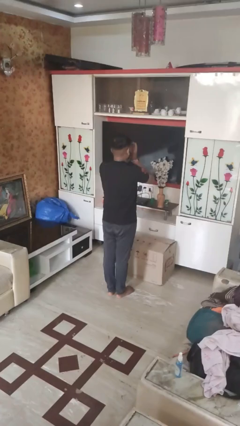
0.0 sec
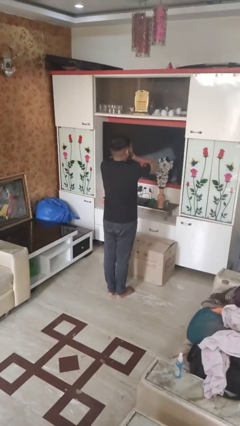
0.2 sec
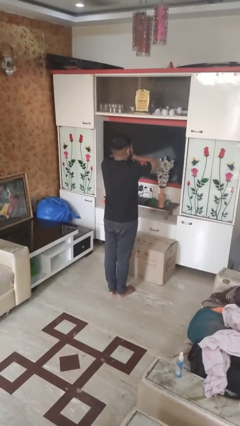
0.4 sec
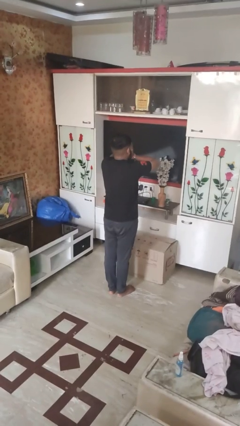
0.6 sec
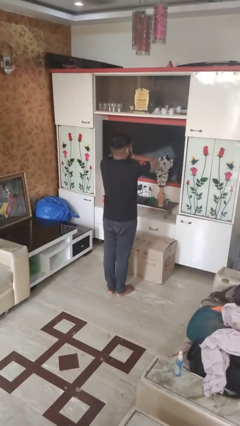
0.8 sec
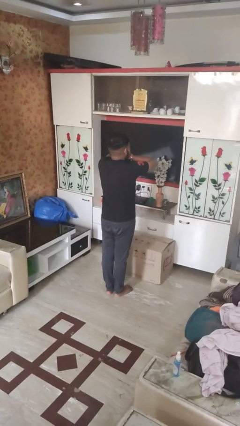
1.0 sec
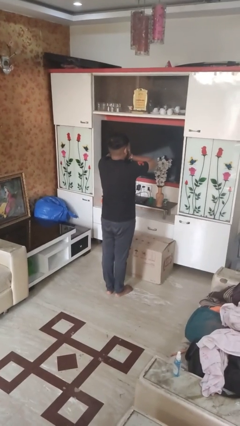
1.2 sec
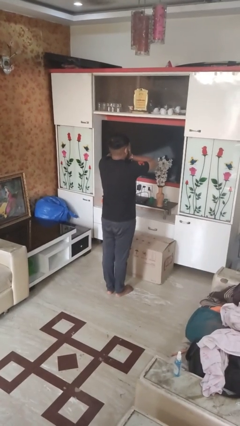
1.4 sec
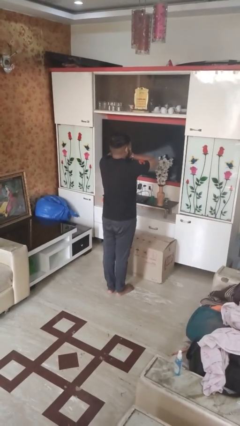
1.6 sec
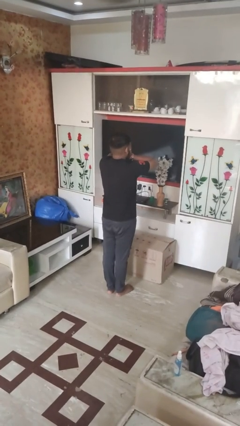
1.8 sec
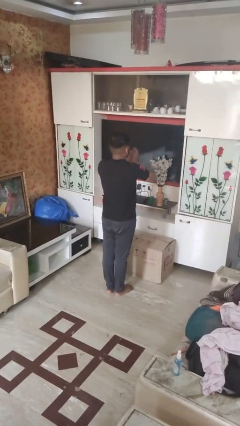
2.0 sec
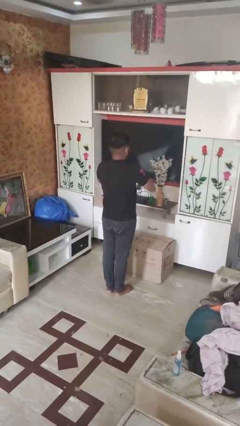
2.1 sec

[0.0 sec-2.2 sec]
person covers face with hands

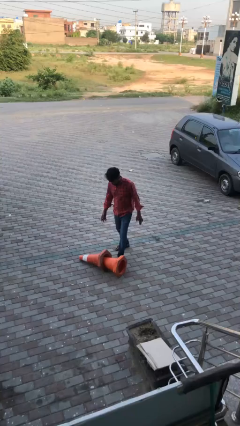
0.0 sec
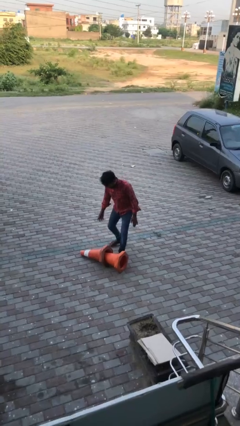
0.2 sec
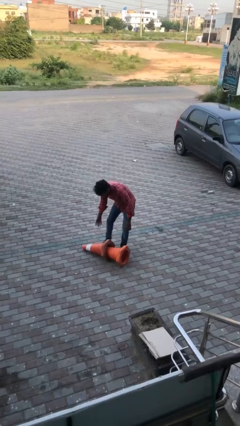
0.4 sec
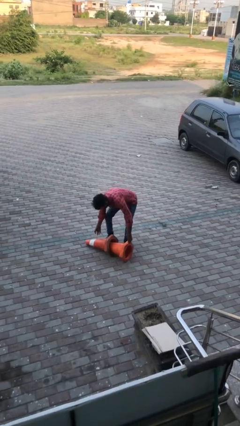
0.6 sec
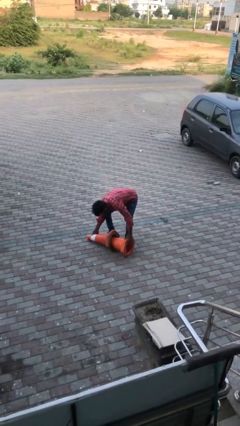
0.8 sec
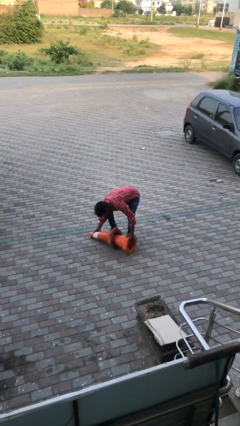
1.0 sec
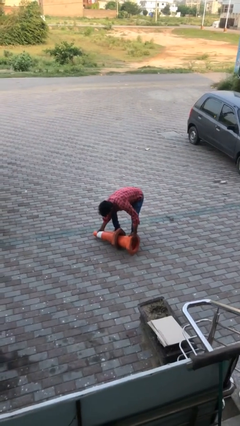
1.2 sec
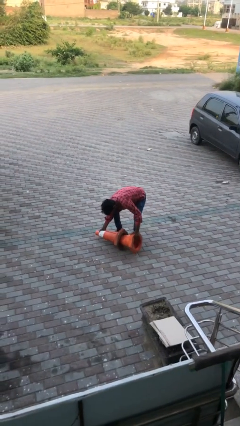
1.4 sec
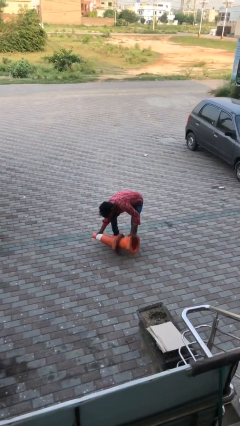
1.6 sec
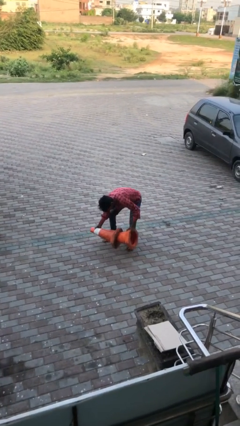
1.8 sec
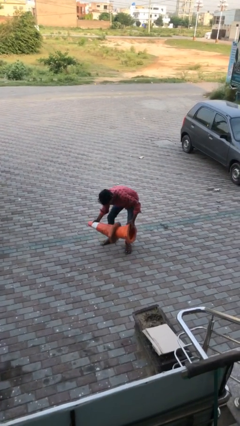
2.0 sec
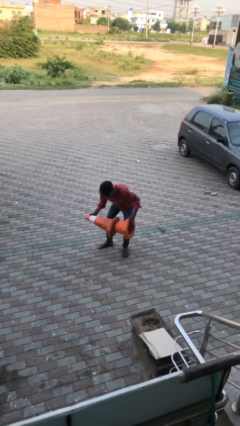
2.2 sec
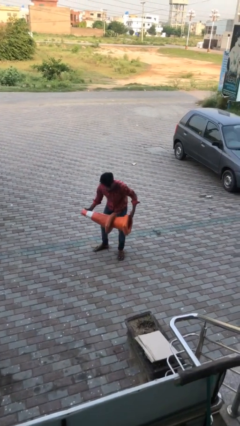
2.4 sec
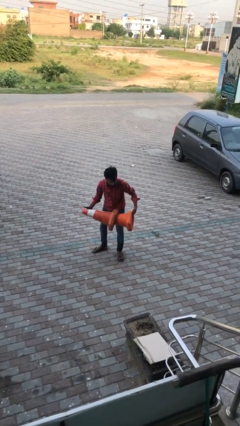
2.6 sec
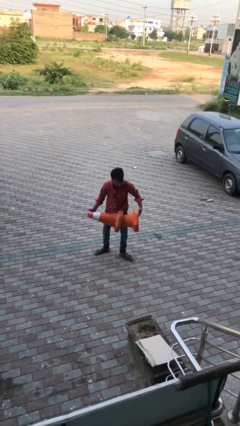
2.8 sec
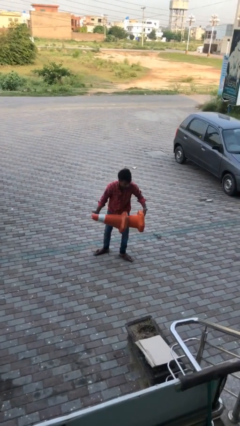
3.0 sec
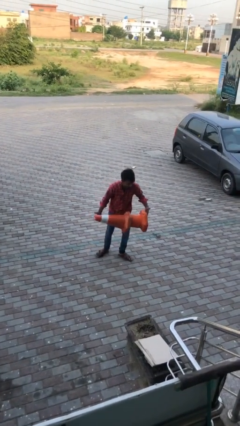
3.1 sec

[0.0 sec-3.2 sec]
person picks up object from floor

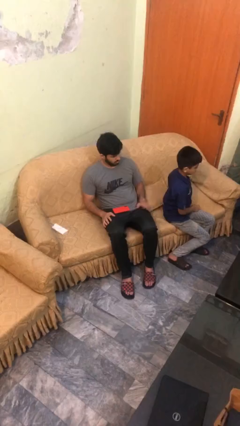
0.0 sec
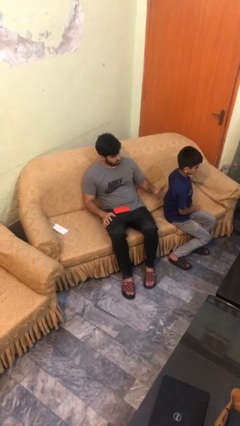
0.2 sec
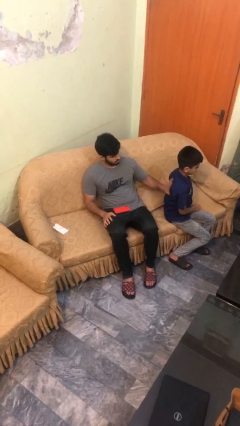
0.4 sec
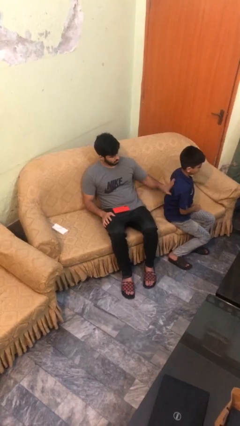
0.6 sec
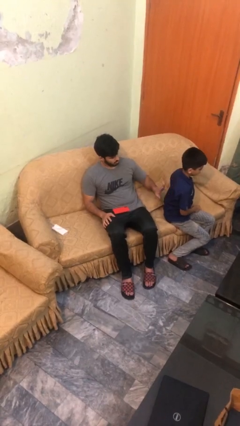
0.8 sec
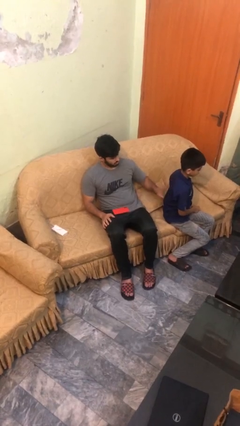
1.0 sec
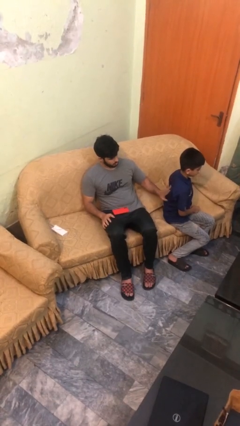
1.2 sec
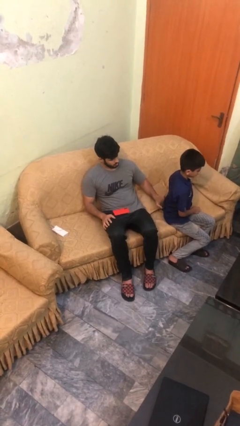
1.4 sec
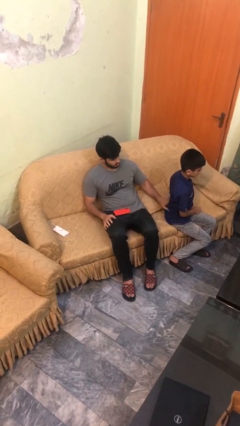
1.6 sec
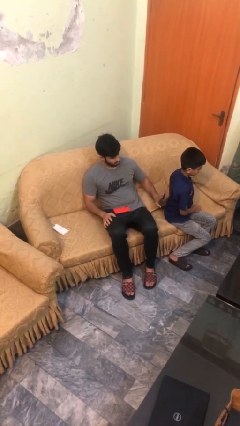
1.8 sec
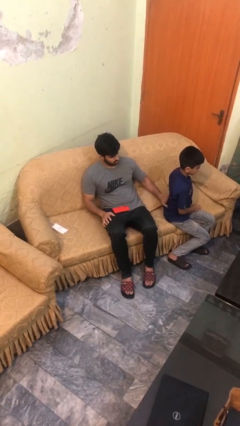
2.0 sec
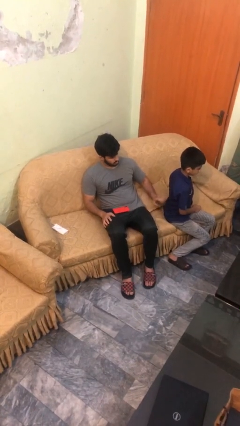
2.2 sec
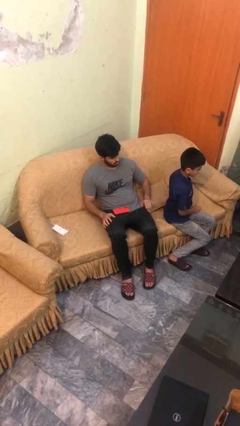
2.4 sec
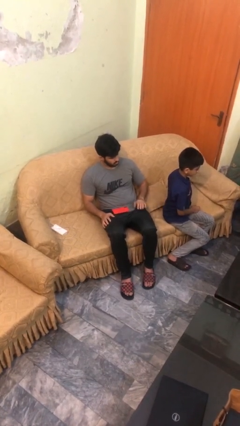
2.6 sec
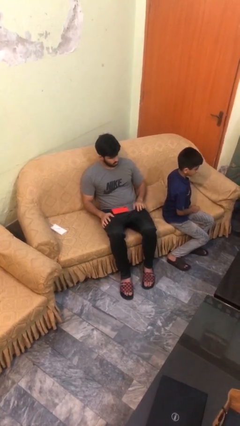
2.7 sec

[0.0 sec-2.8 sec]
person touches back of person

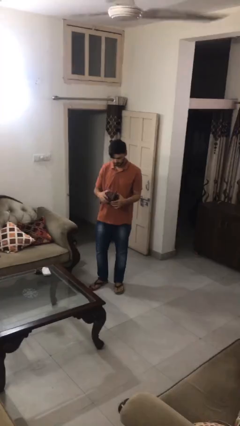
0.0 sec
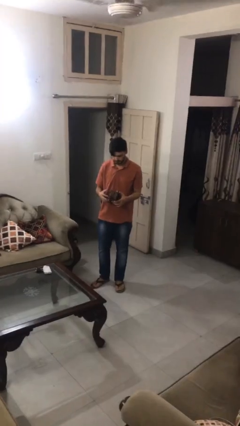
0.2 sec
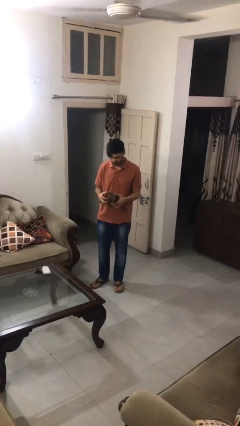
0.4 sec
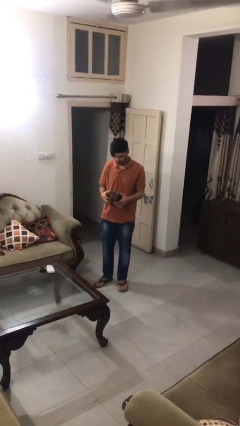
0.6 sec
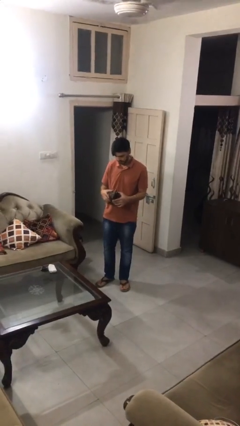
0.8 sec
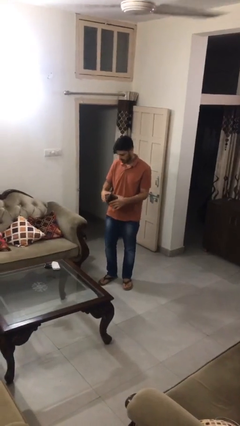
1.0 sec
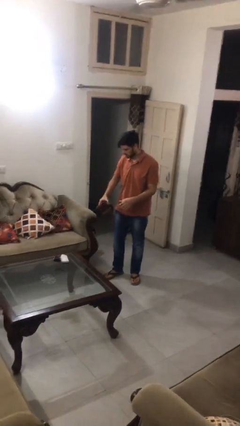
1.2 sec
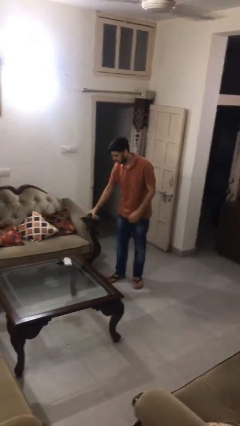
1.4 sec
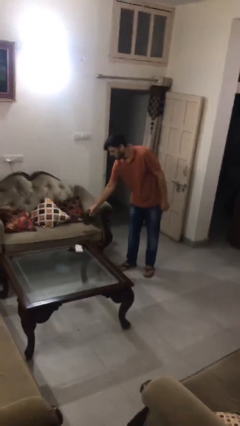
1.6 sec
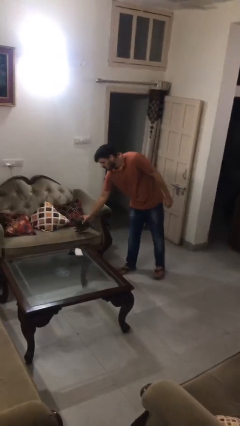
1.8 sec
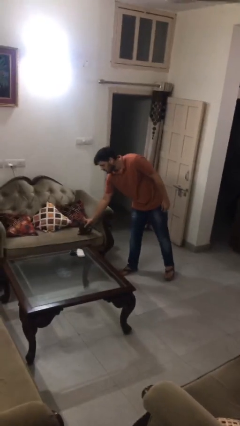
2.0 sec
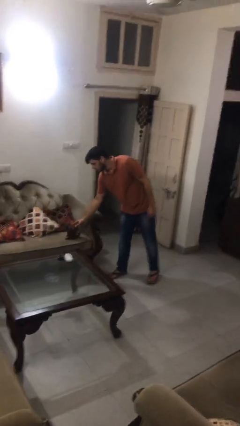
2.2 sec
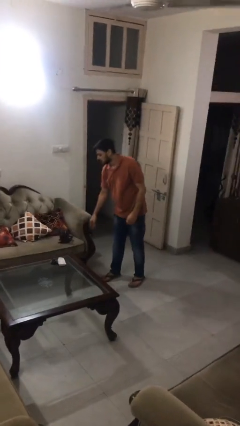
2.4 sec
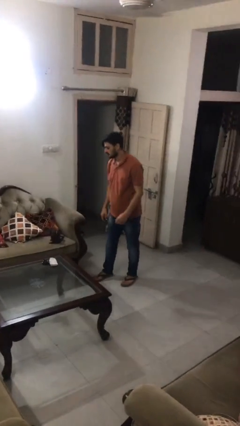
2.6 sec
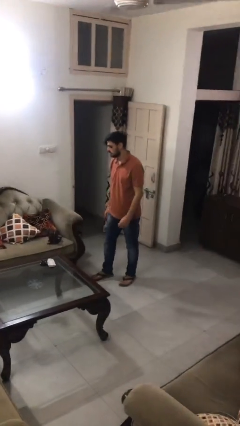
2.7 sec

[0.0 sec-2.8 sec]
person puts down object on couch

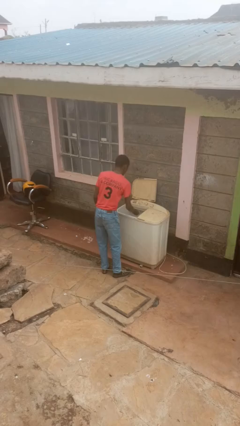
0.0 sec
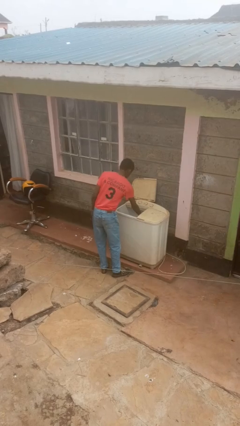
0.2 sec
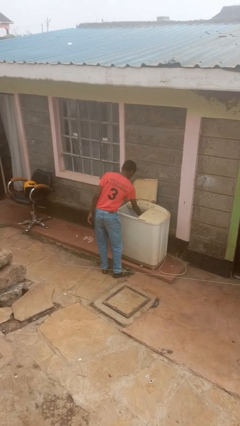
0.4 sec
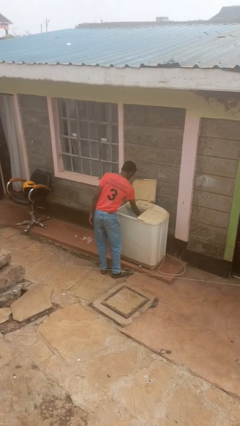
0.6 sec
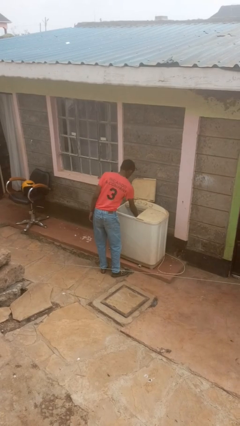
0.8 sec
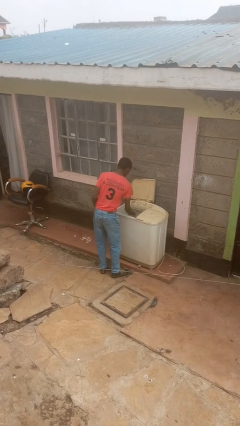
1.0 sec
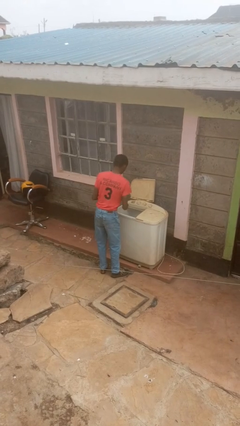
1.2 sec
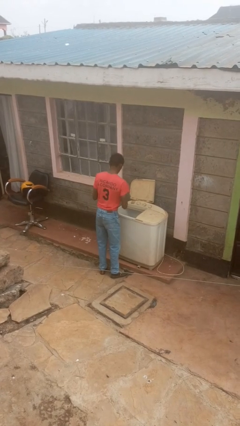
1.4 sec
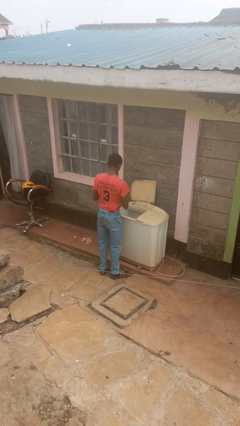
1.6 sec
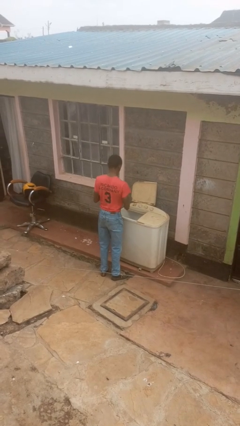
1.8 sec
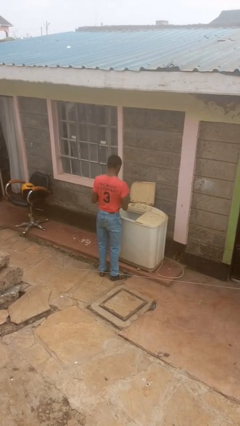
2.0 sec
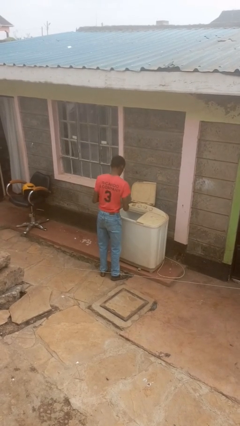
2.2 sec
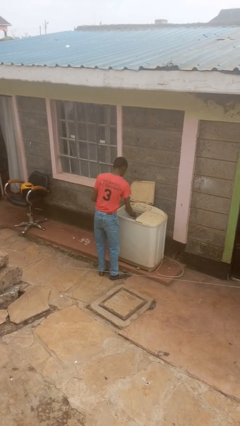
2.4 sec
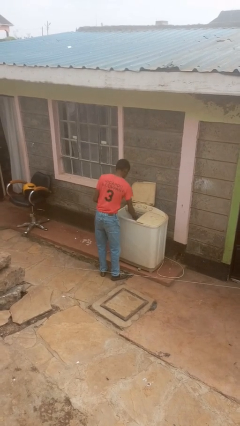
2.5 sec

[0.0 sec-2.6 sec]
person cleans dryer lint trap

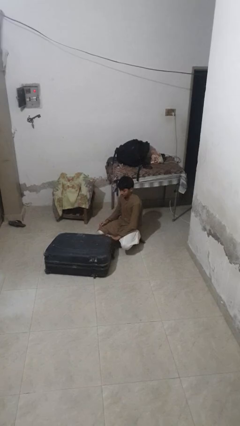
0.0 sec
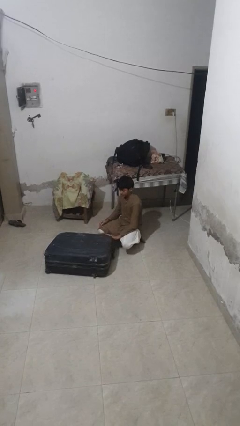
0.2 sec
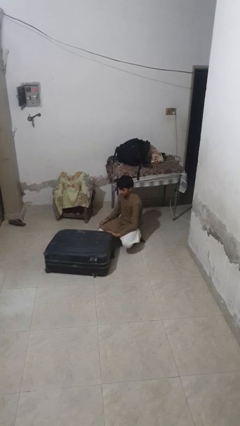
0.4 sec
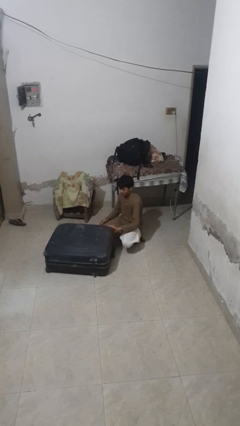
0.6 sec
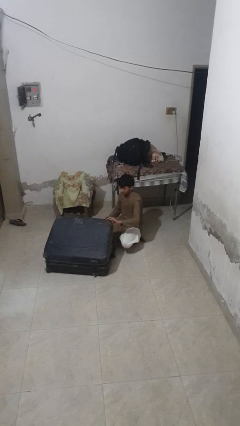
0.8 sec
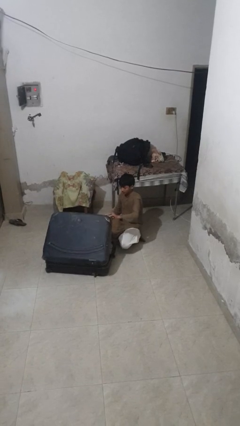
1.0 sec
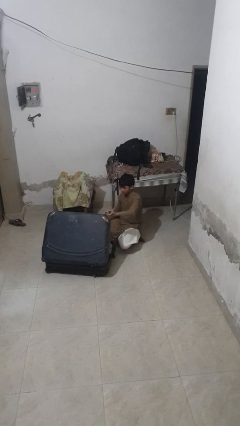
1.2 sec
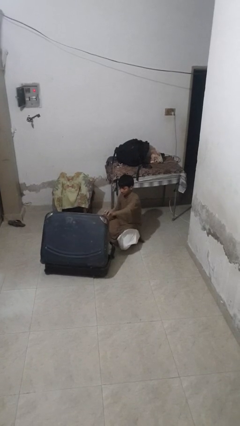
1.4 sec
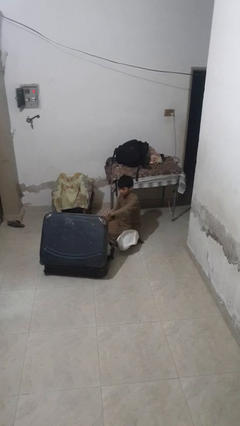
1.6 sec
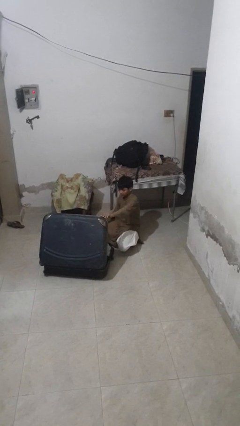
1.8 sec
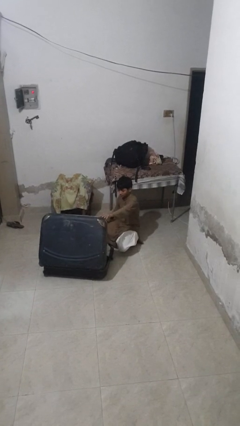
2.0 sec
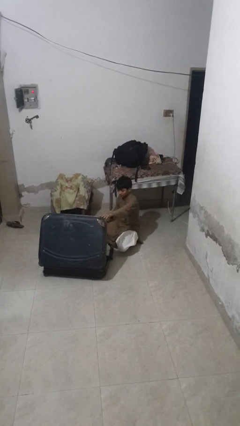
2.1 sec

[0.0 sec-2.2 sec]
person opens suitcase

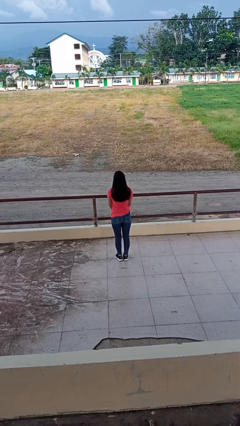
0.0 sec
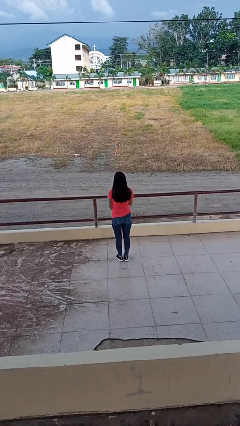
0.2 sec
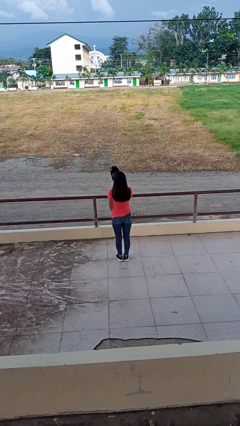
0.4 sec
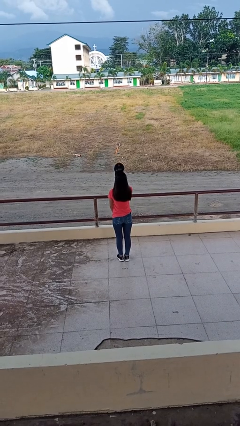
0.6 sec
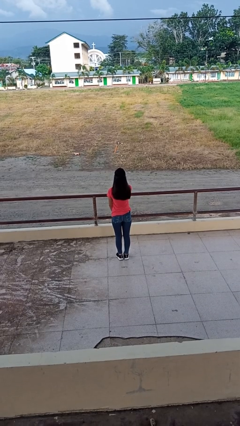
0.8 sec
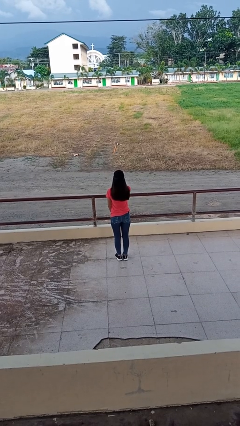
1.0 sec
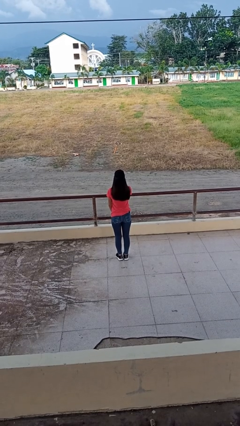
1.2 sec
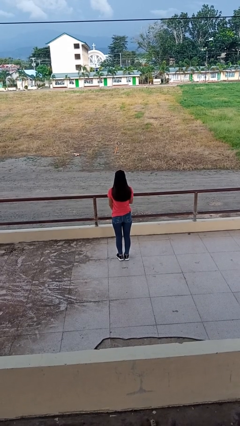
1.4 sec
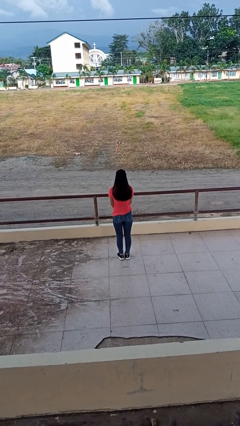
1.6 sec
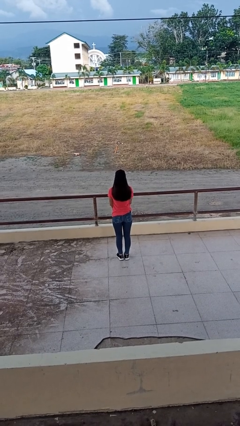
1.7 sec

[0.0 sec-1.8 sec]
person puts on hat
